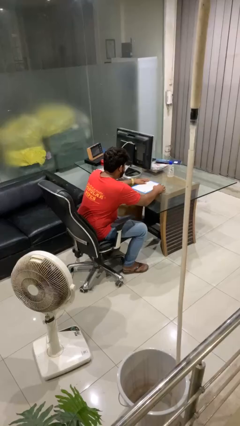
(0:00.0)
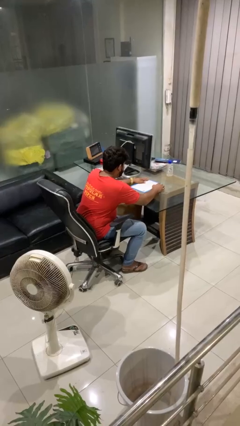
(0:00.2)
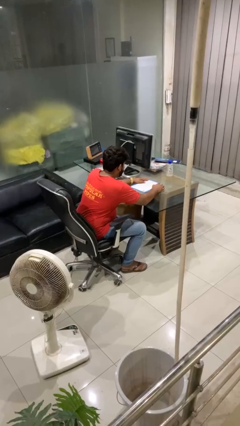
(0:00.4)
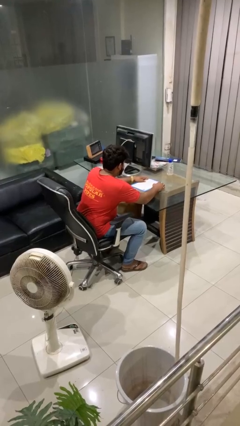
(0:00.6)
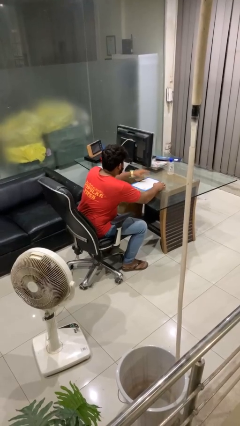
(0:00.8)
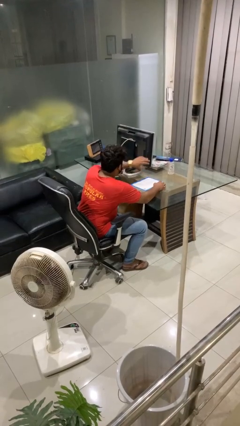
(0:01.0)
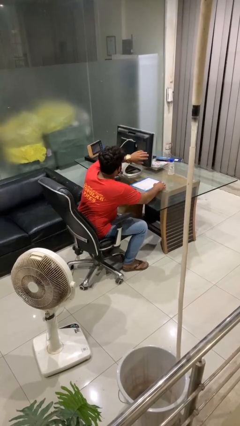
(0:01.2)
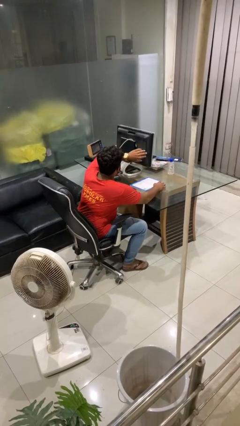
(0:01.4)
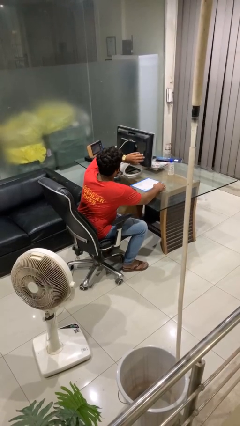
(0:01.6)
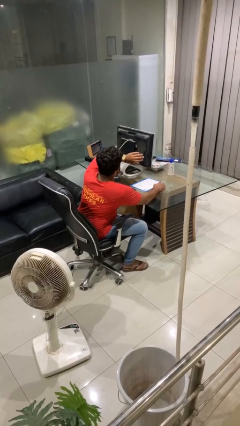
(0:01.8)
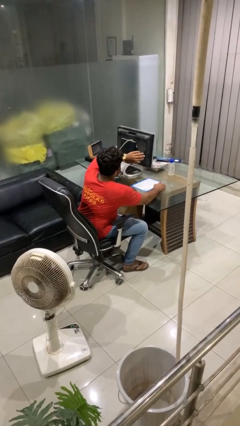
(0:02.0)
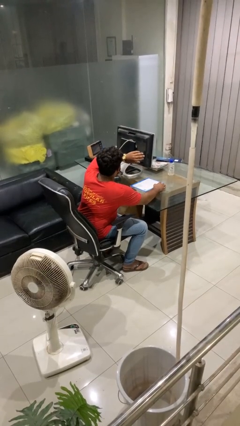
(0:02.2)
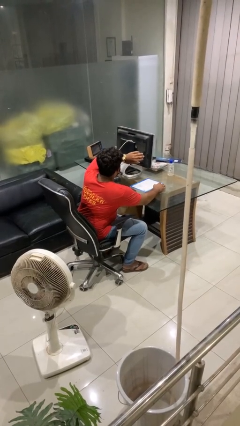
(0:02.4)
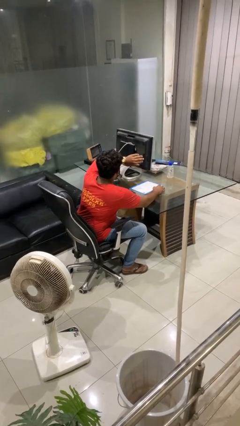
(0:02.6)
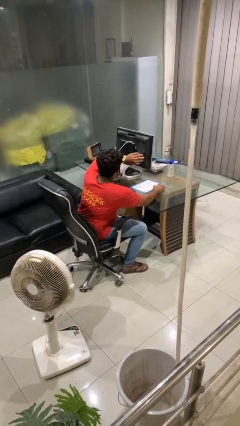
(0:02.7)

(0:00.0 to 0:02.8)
person looks at wristwatch

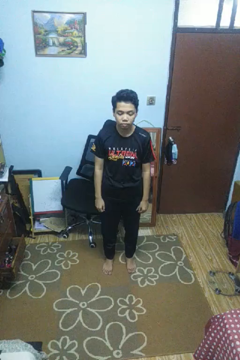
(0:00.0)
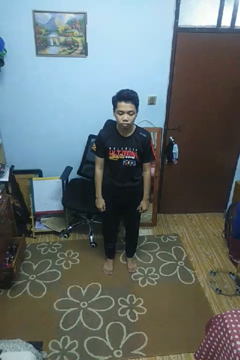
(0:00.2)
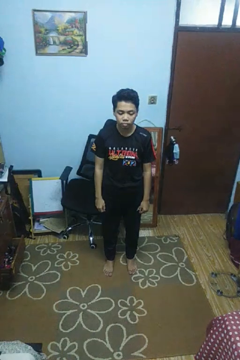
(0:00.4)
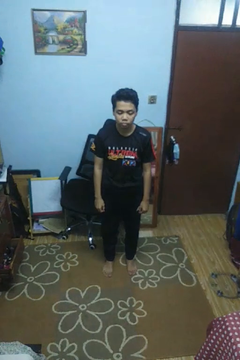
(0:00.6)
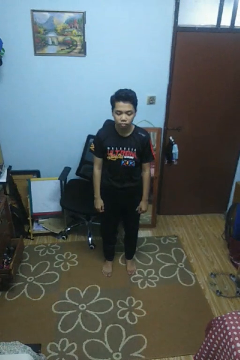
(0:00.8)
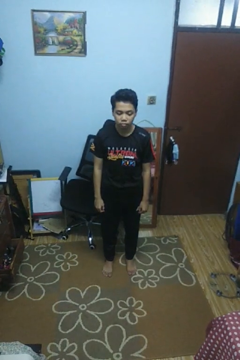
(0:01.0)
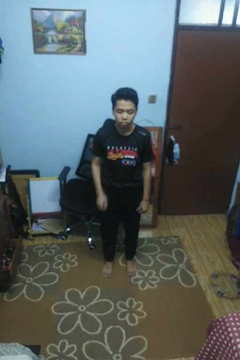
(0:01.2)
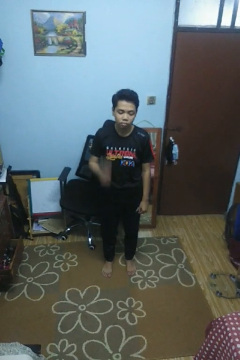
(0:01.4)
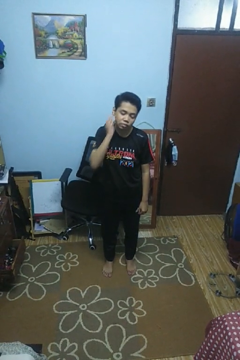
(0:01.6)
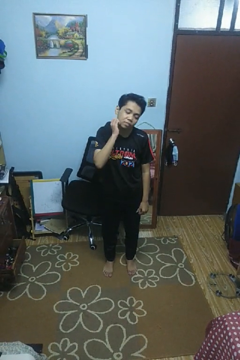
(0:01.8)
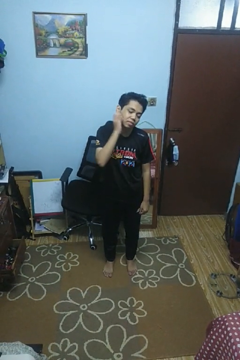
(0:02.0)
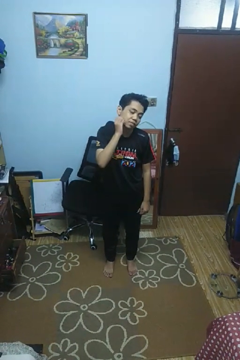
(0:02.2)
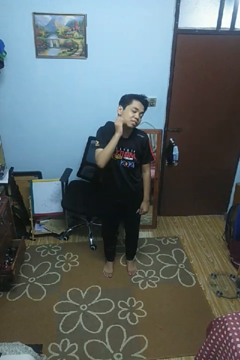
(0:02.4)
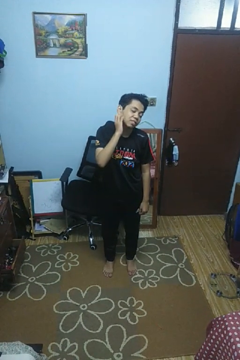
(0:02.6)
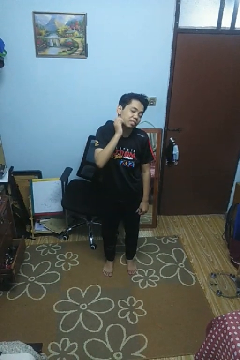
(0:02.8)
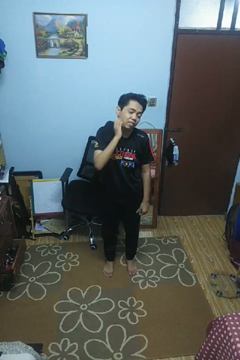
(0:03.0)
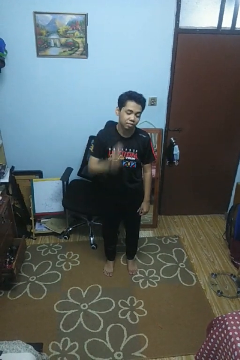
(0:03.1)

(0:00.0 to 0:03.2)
person scratches face

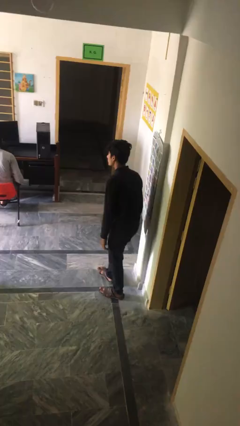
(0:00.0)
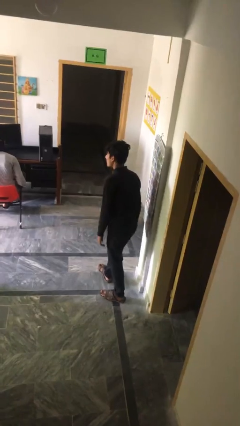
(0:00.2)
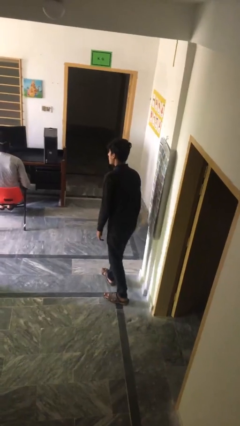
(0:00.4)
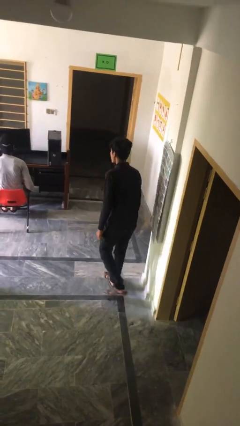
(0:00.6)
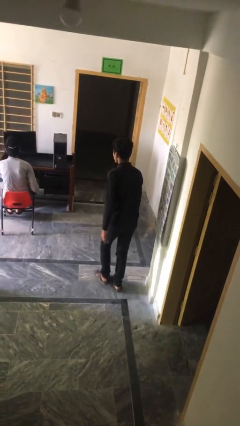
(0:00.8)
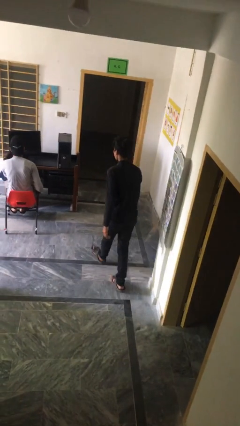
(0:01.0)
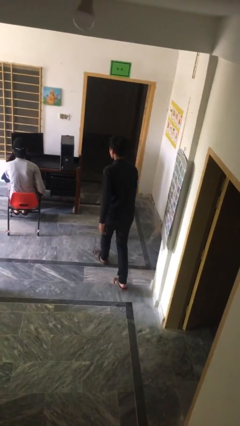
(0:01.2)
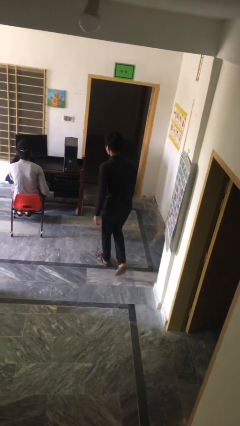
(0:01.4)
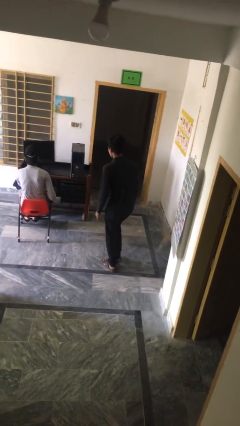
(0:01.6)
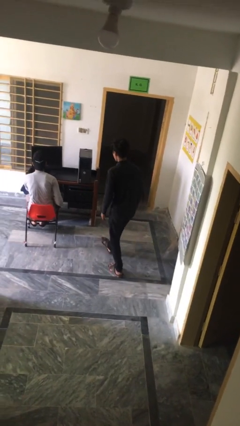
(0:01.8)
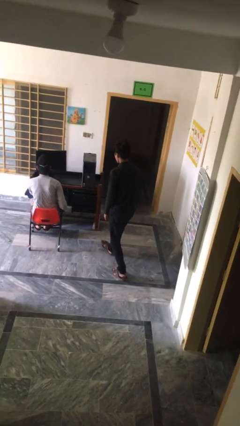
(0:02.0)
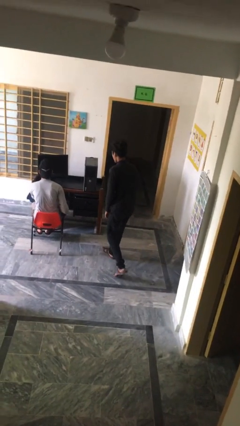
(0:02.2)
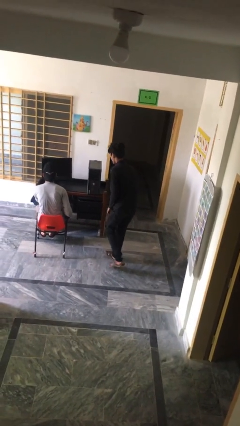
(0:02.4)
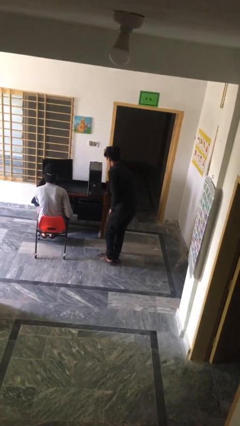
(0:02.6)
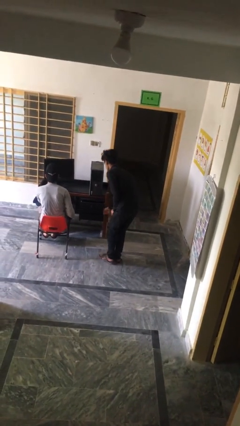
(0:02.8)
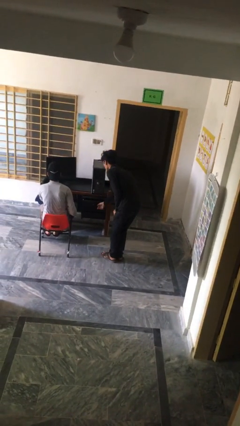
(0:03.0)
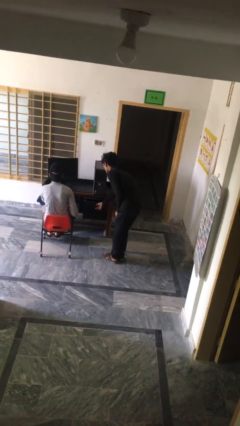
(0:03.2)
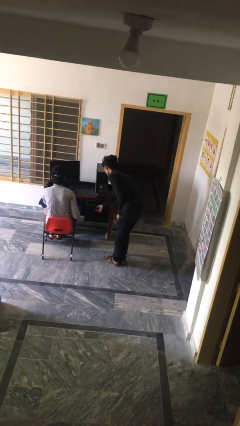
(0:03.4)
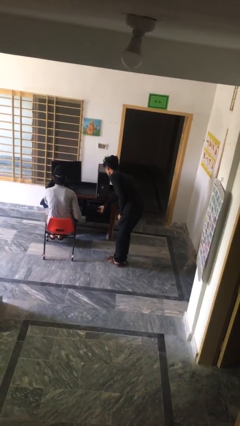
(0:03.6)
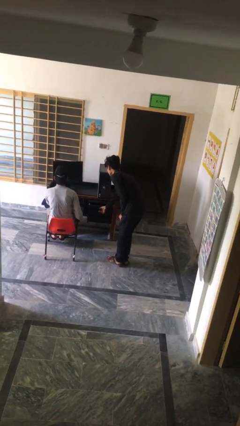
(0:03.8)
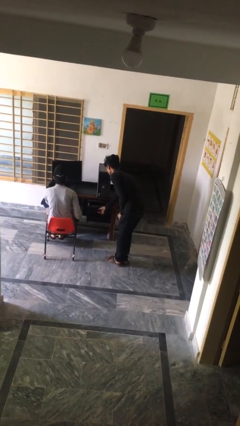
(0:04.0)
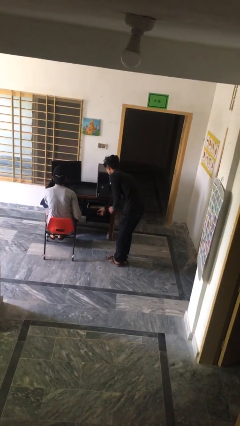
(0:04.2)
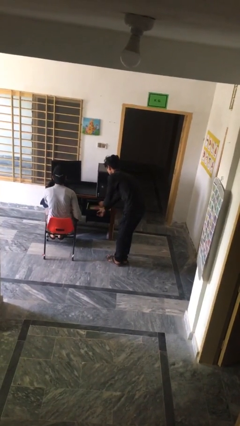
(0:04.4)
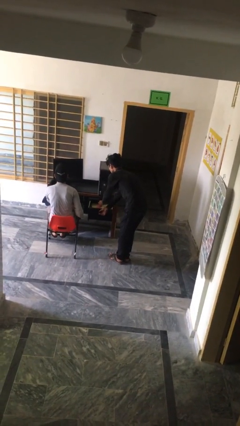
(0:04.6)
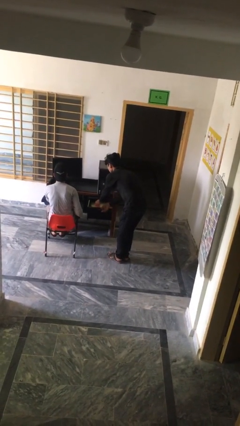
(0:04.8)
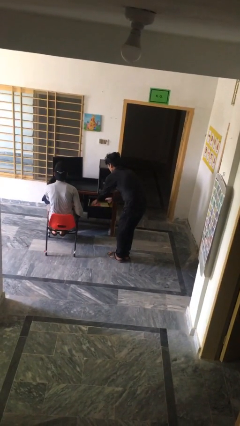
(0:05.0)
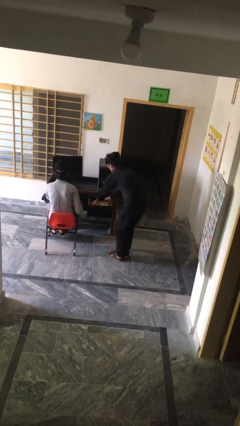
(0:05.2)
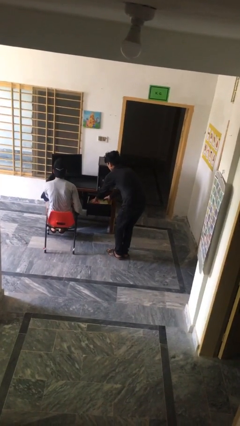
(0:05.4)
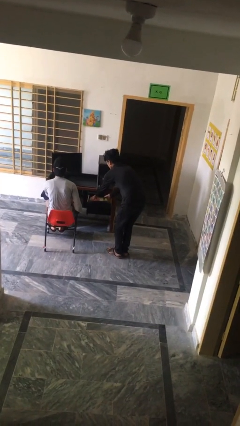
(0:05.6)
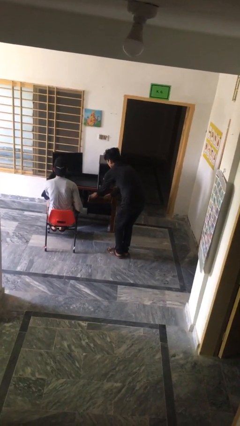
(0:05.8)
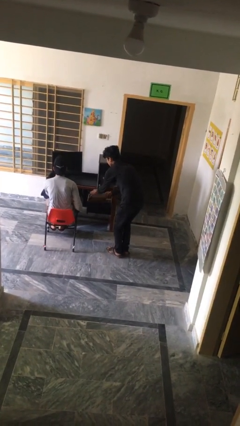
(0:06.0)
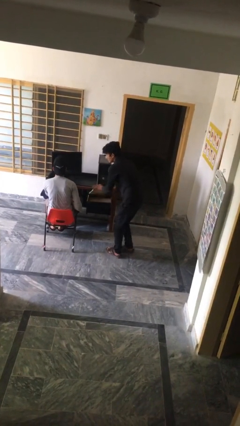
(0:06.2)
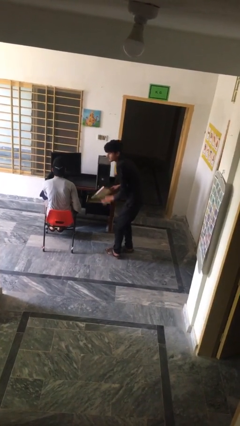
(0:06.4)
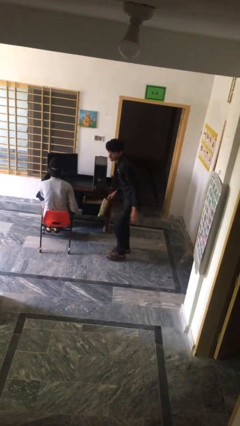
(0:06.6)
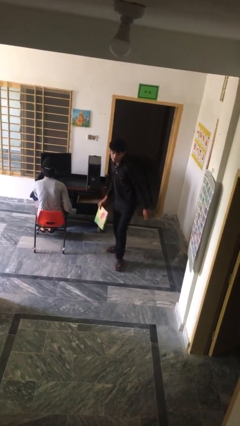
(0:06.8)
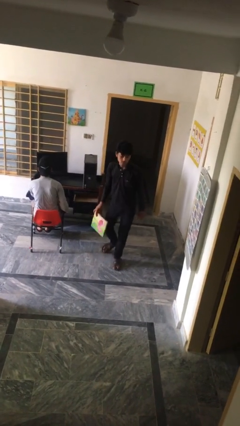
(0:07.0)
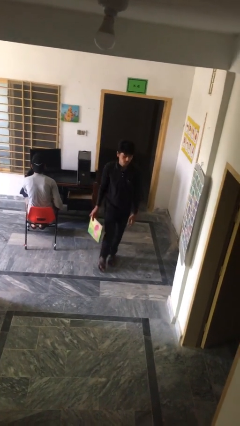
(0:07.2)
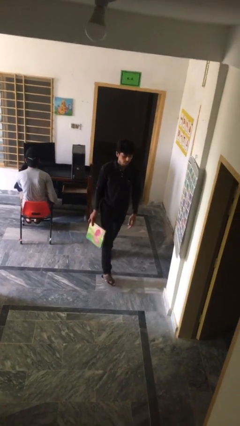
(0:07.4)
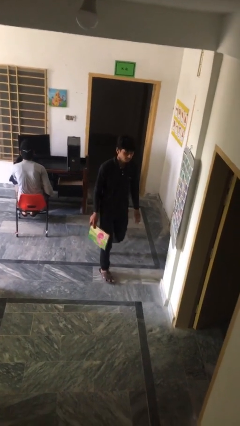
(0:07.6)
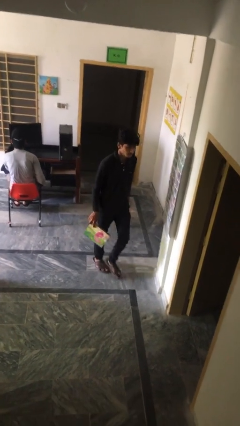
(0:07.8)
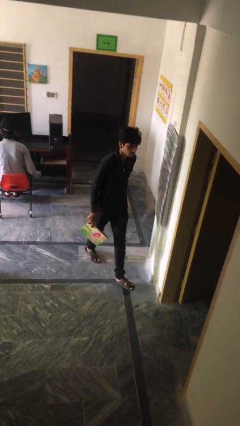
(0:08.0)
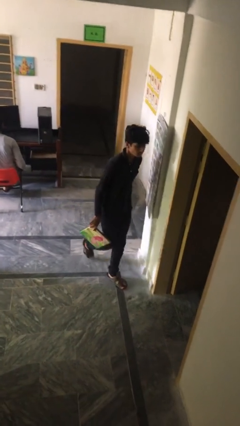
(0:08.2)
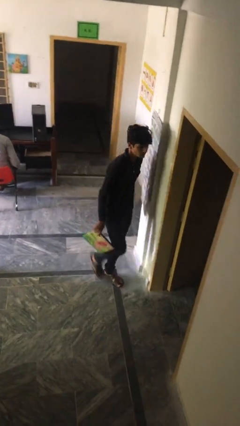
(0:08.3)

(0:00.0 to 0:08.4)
person steals object from person

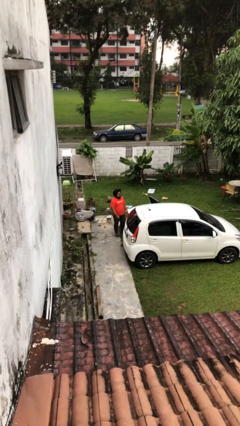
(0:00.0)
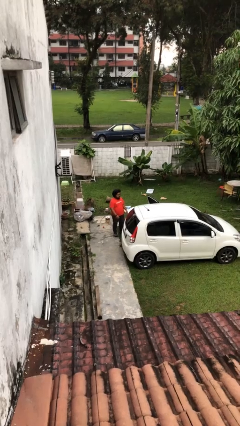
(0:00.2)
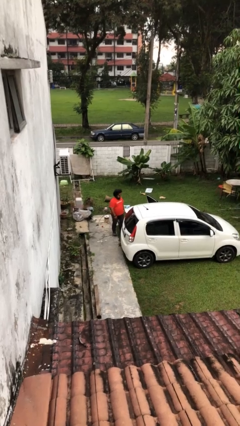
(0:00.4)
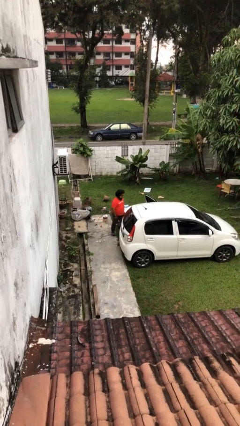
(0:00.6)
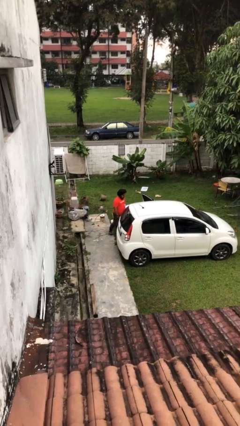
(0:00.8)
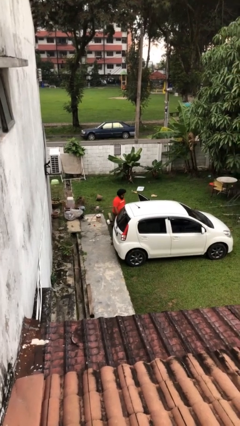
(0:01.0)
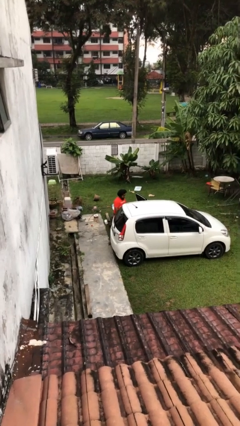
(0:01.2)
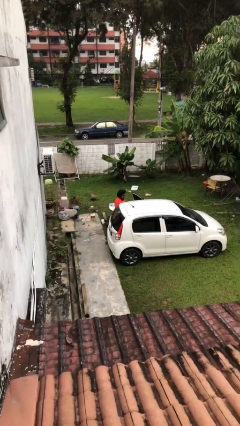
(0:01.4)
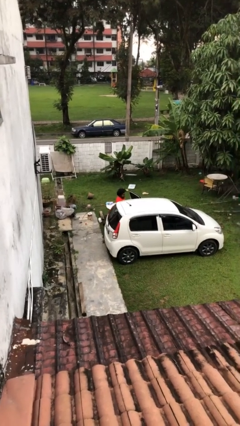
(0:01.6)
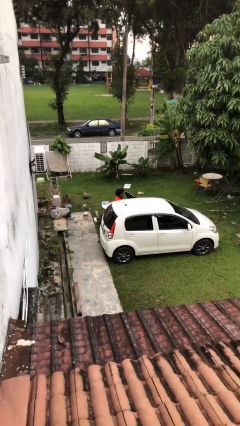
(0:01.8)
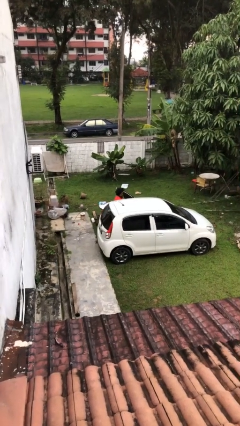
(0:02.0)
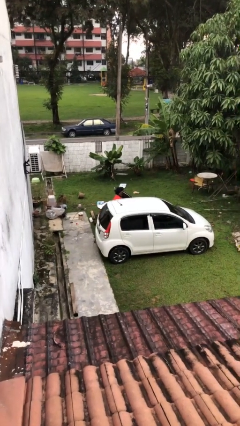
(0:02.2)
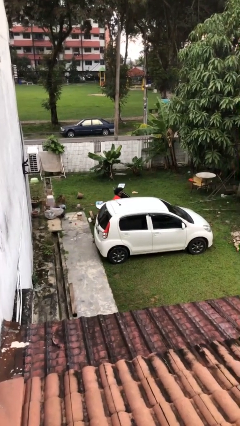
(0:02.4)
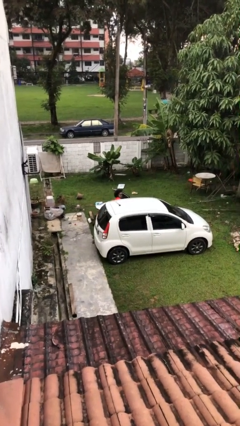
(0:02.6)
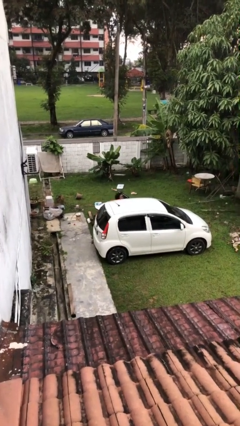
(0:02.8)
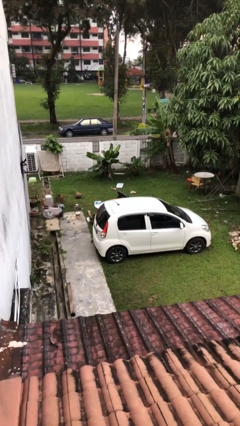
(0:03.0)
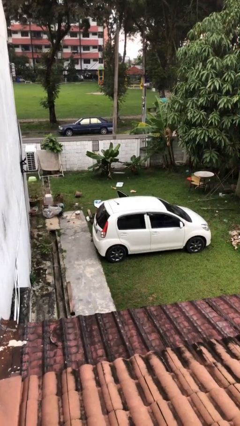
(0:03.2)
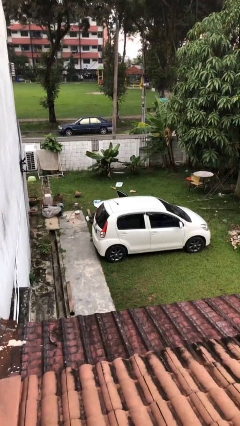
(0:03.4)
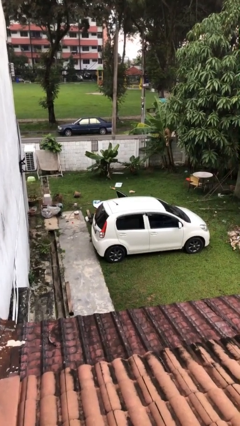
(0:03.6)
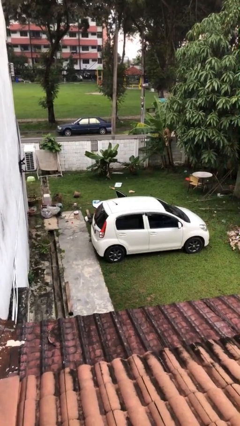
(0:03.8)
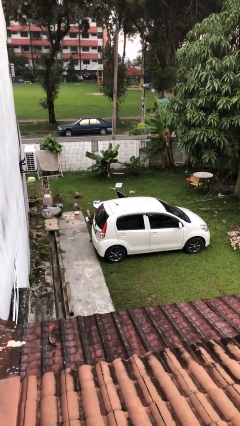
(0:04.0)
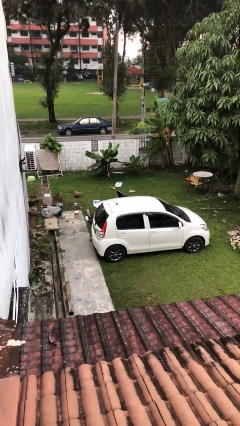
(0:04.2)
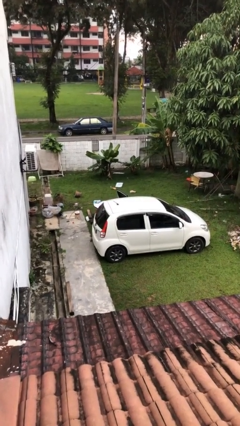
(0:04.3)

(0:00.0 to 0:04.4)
person enters car
